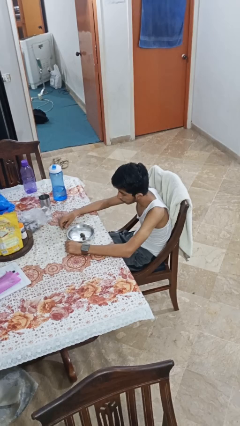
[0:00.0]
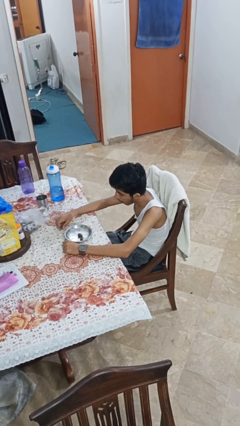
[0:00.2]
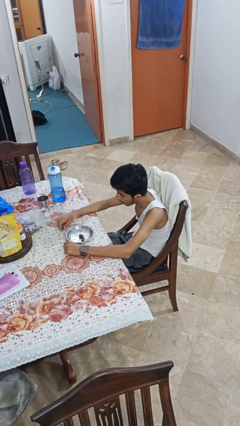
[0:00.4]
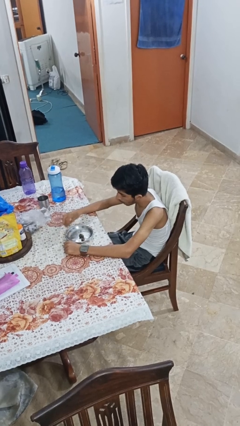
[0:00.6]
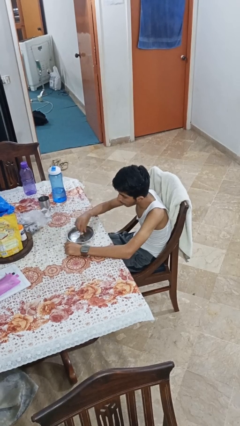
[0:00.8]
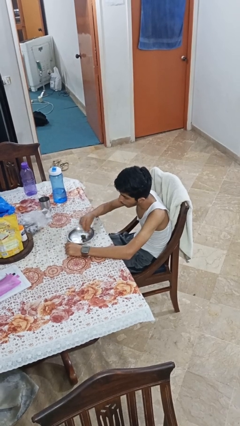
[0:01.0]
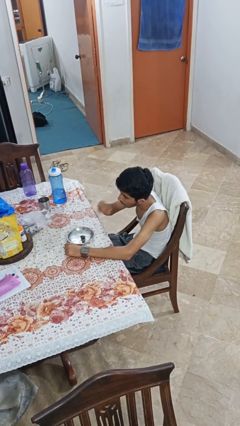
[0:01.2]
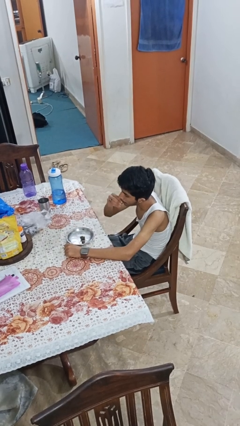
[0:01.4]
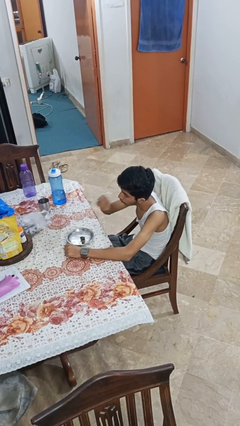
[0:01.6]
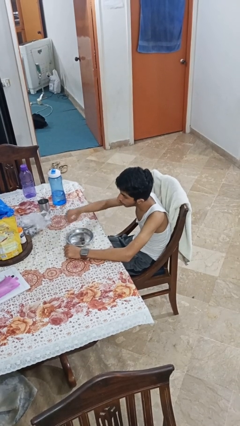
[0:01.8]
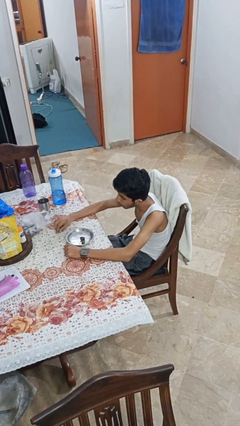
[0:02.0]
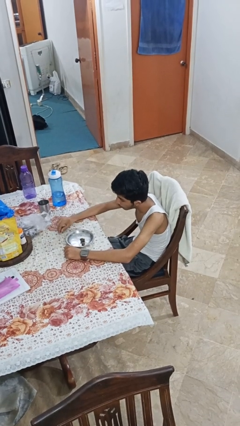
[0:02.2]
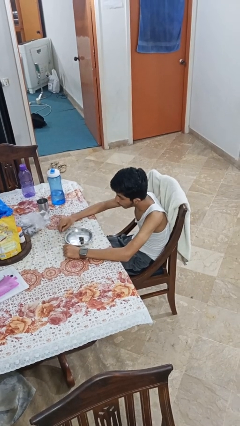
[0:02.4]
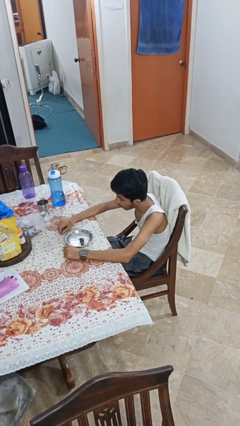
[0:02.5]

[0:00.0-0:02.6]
person eats with hands

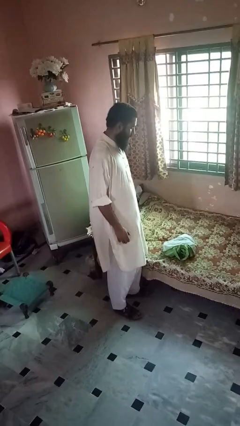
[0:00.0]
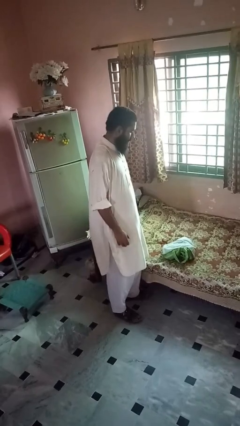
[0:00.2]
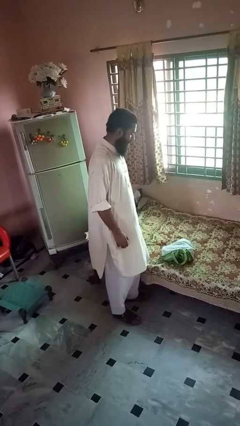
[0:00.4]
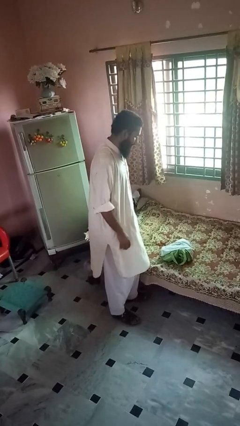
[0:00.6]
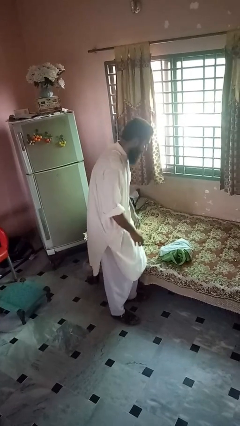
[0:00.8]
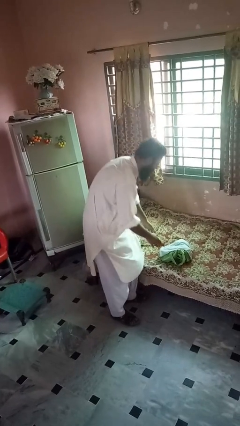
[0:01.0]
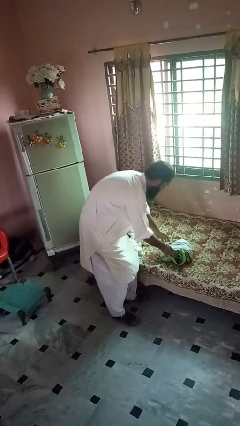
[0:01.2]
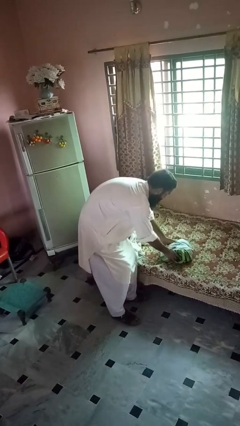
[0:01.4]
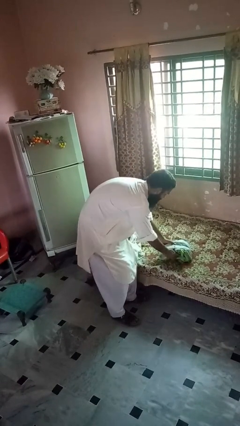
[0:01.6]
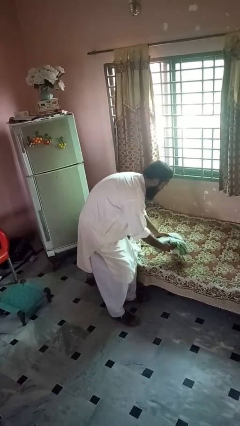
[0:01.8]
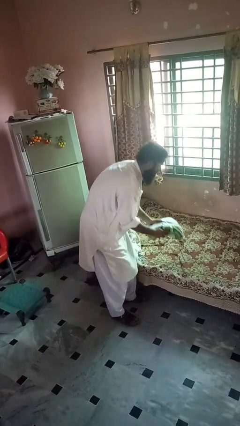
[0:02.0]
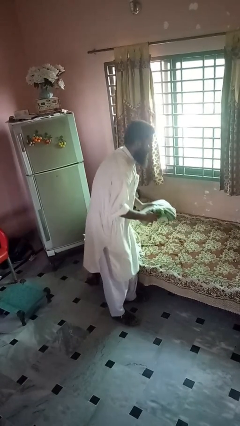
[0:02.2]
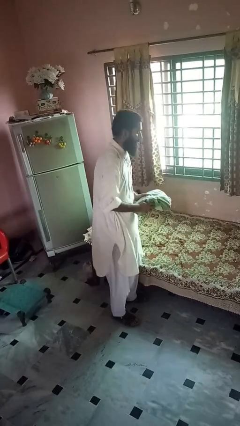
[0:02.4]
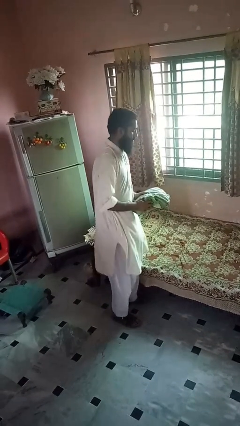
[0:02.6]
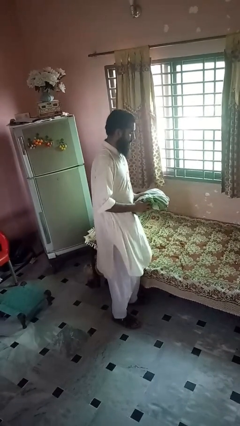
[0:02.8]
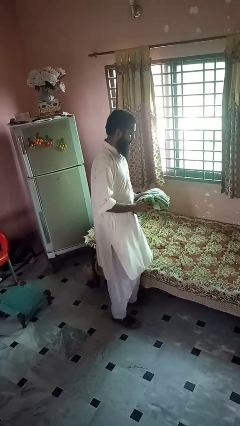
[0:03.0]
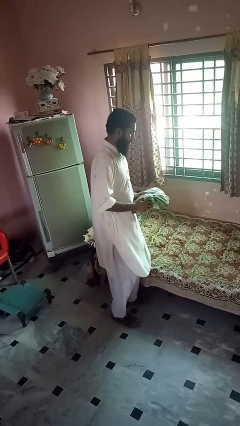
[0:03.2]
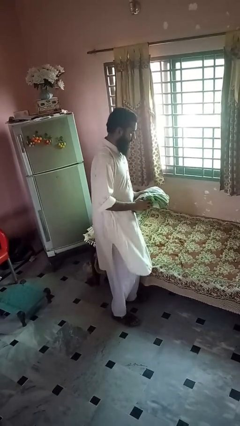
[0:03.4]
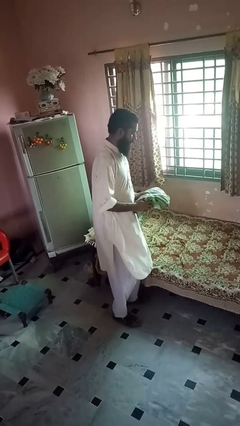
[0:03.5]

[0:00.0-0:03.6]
person picks up object from bed

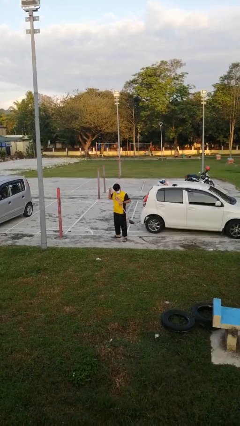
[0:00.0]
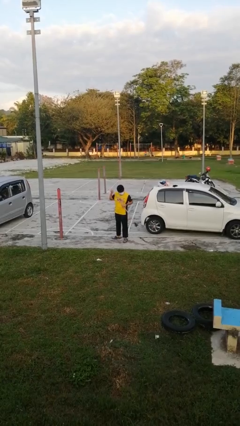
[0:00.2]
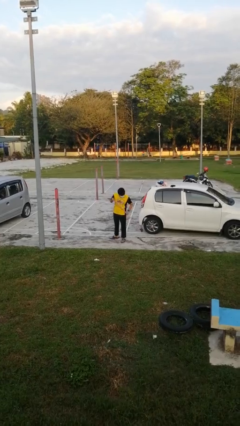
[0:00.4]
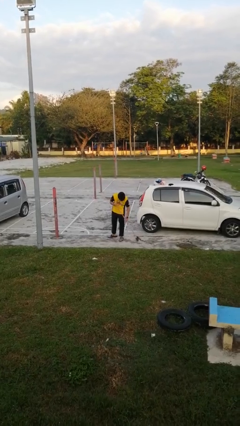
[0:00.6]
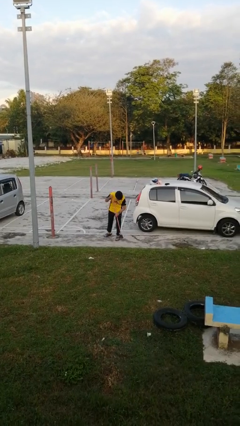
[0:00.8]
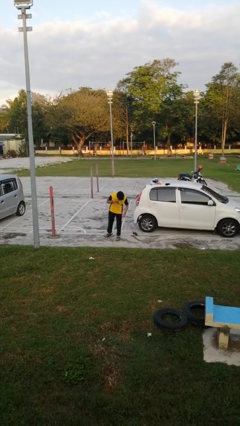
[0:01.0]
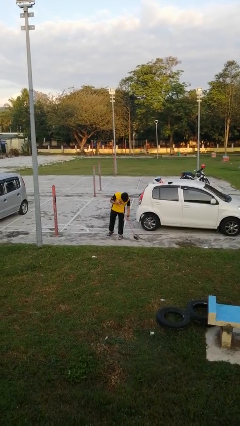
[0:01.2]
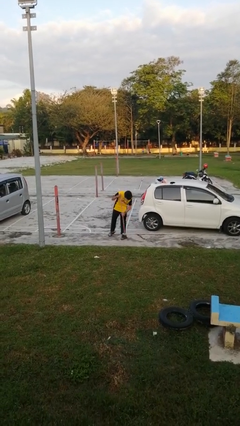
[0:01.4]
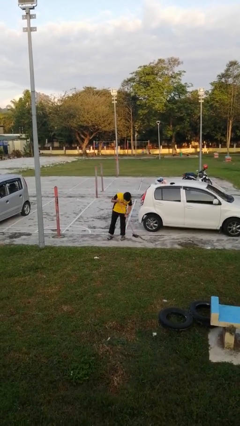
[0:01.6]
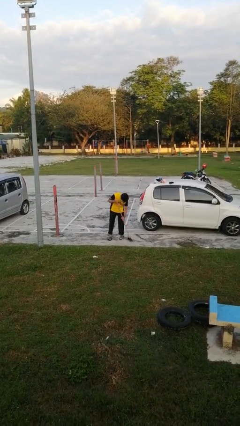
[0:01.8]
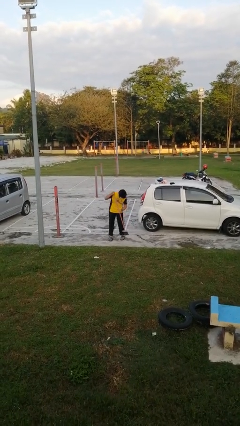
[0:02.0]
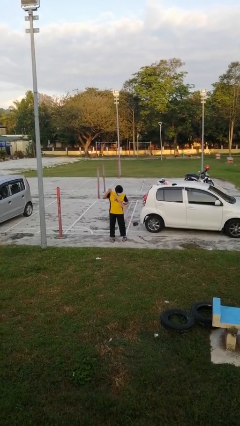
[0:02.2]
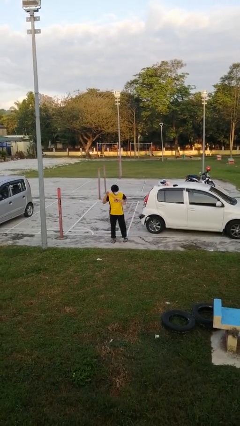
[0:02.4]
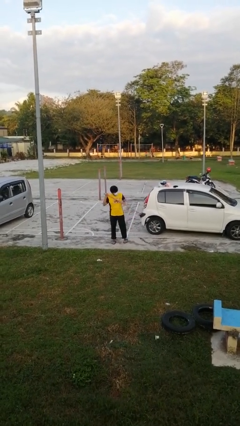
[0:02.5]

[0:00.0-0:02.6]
person sweeps floor

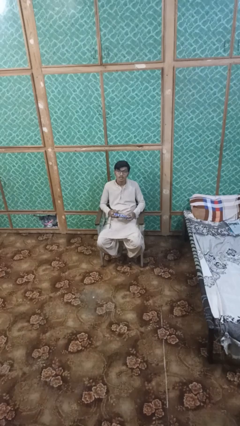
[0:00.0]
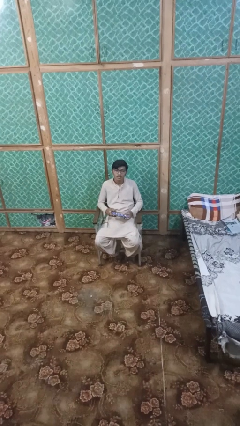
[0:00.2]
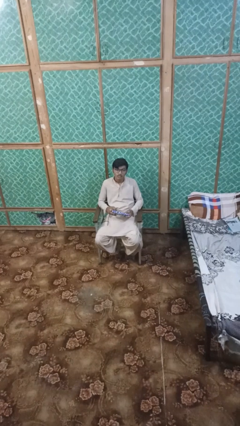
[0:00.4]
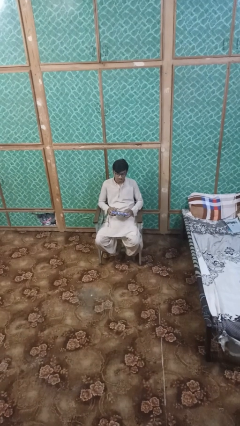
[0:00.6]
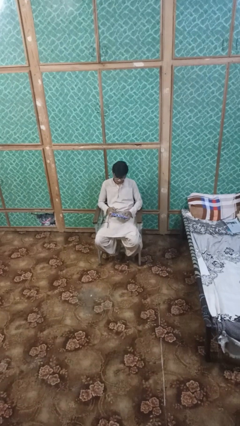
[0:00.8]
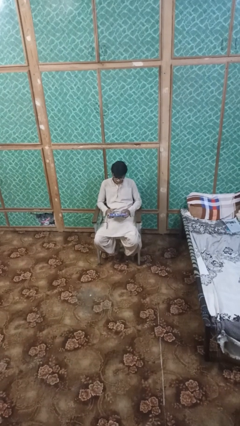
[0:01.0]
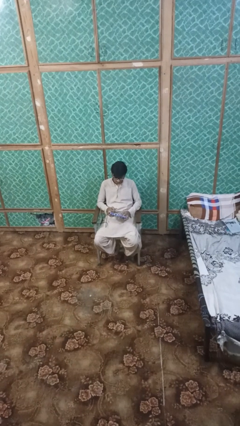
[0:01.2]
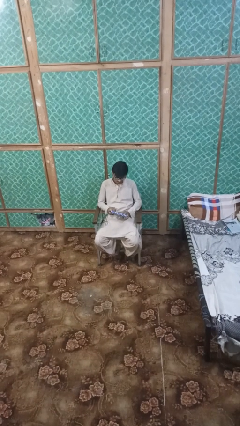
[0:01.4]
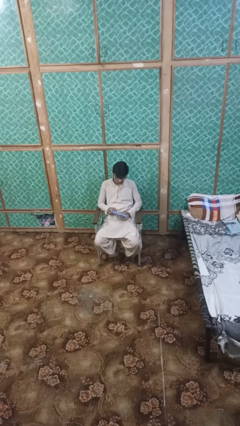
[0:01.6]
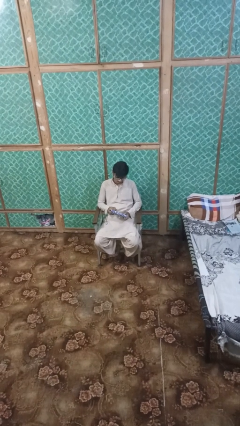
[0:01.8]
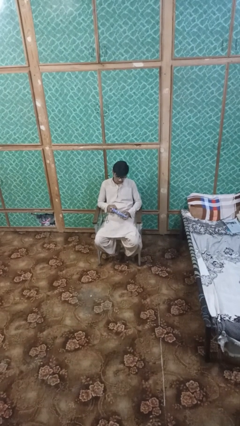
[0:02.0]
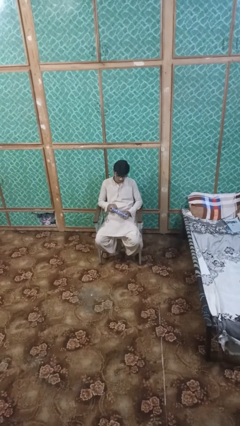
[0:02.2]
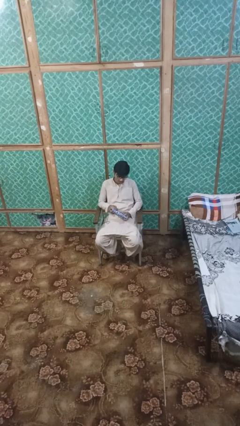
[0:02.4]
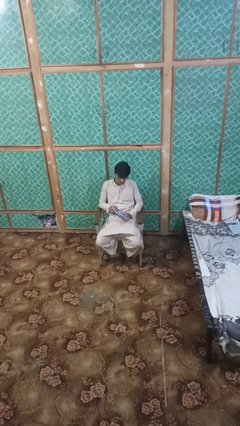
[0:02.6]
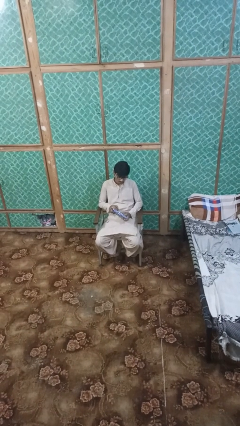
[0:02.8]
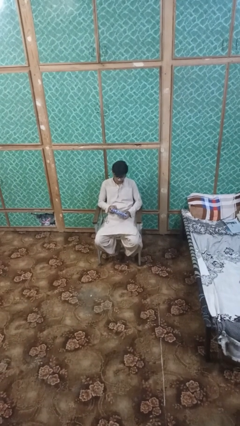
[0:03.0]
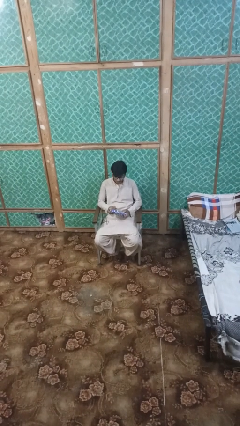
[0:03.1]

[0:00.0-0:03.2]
person interacts with handheld game

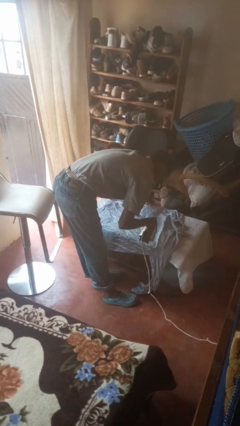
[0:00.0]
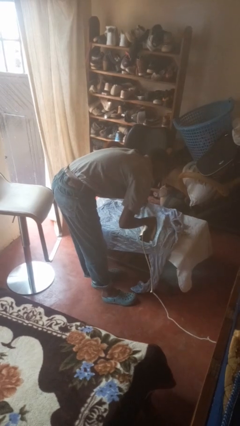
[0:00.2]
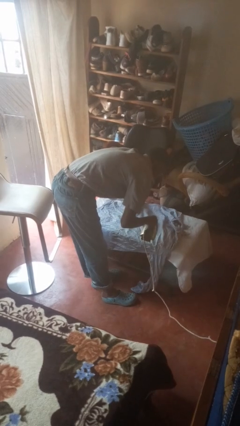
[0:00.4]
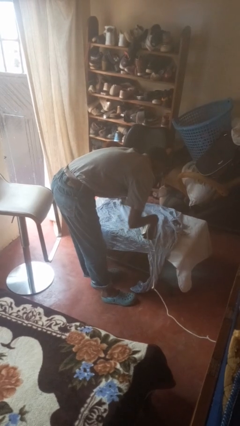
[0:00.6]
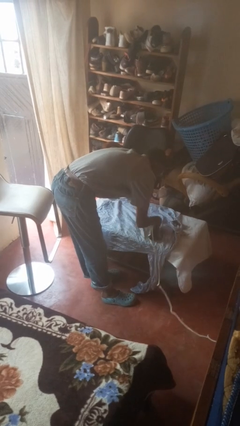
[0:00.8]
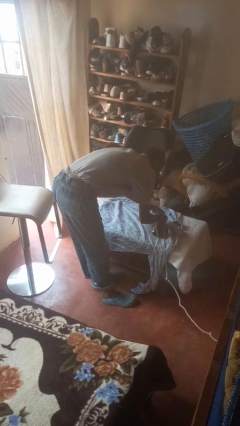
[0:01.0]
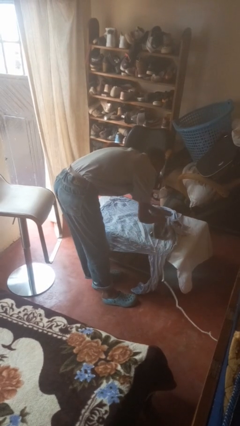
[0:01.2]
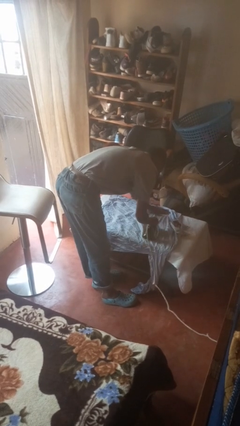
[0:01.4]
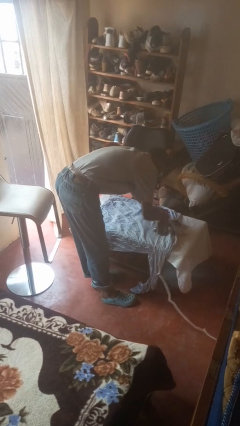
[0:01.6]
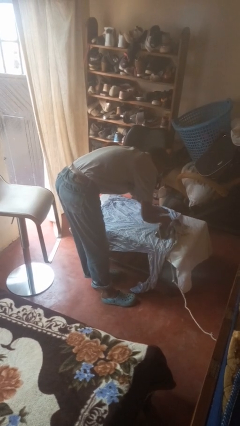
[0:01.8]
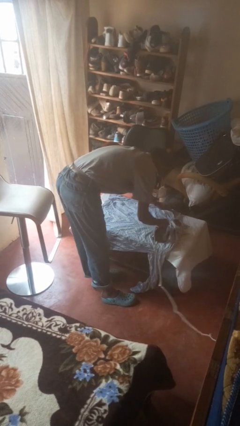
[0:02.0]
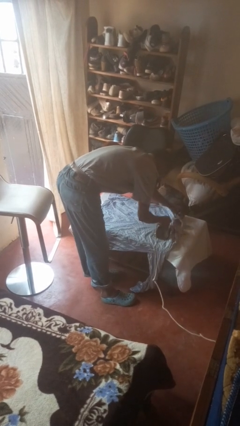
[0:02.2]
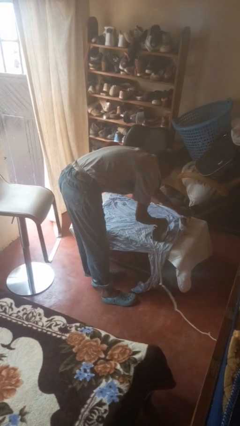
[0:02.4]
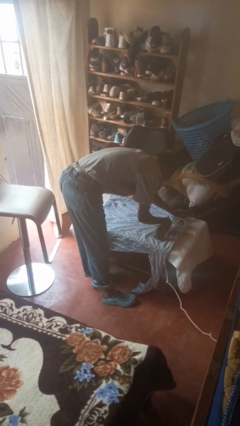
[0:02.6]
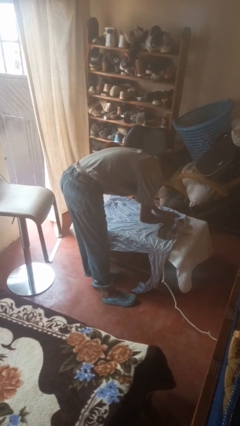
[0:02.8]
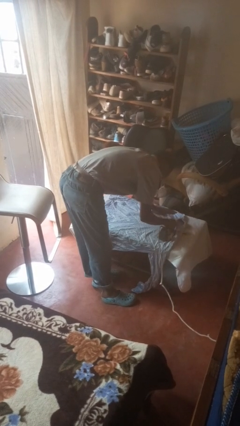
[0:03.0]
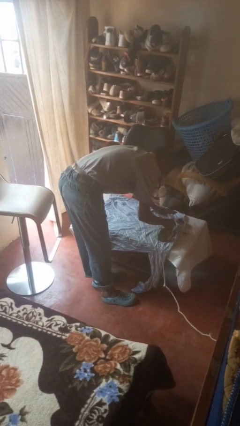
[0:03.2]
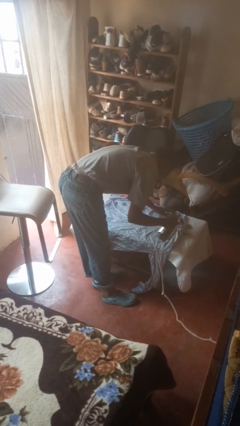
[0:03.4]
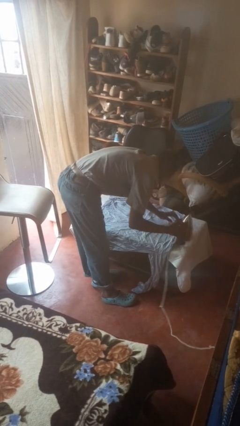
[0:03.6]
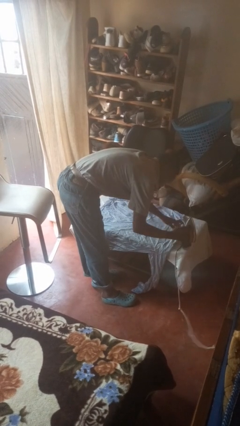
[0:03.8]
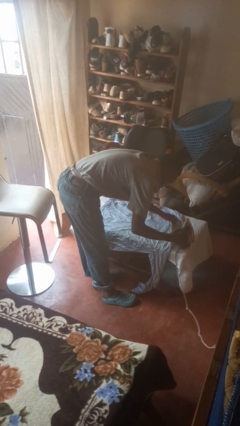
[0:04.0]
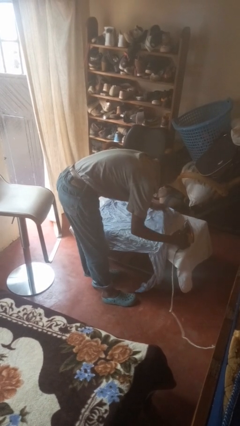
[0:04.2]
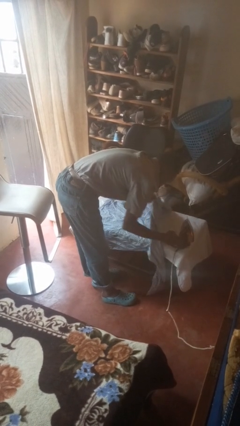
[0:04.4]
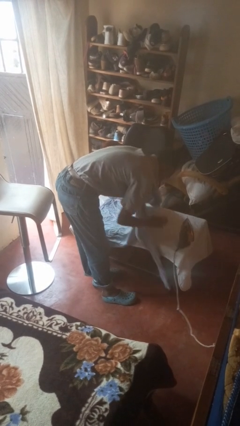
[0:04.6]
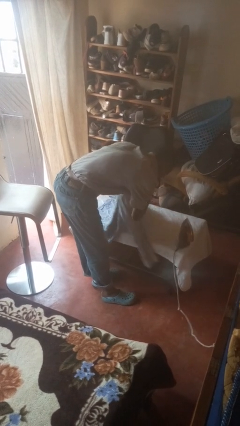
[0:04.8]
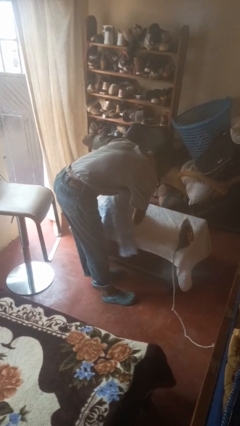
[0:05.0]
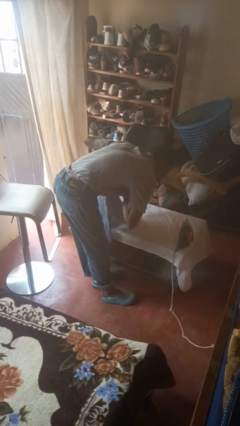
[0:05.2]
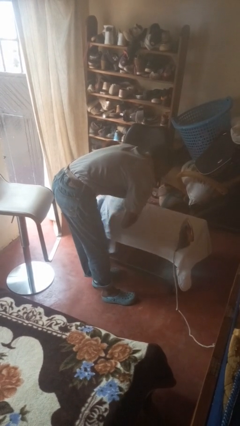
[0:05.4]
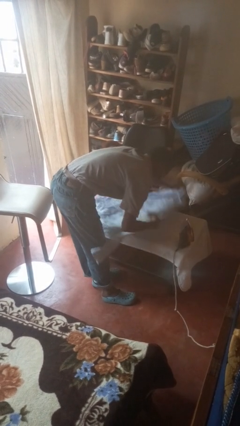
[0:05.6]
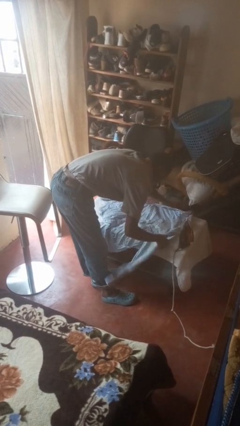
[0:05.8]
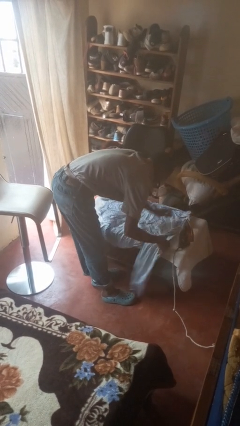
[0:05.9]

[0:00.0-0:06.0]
person irons clothes
